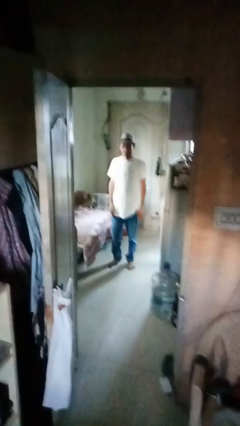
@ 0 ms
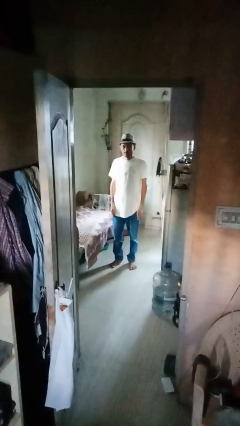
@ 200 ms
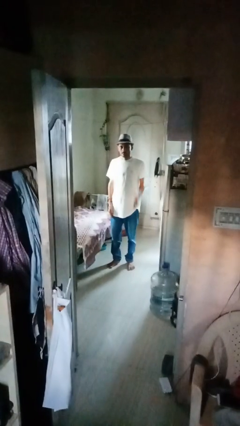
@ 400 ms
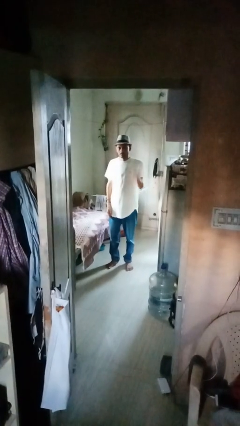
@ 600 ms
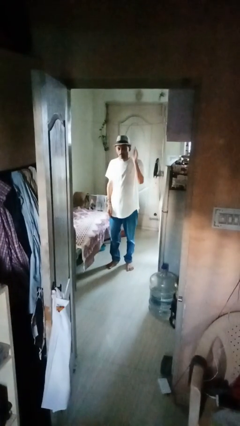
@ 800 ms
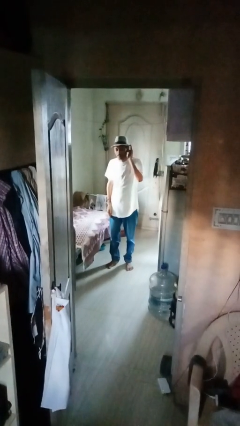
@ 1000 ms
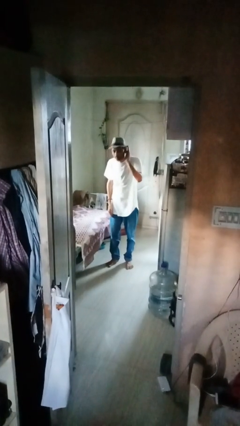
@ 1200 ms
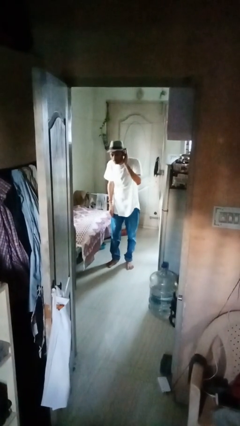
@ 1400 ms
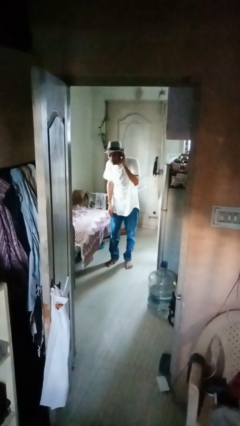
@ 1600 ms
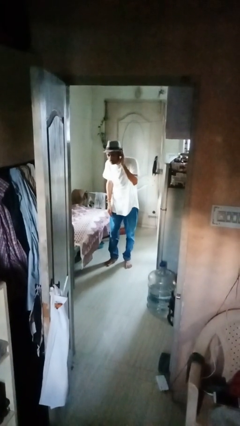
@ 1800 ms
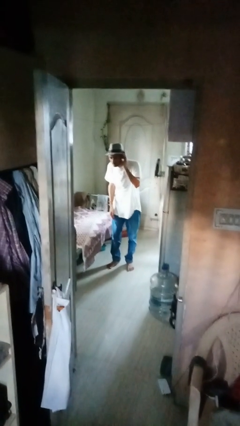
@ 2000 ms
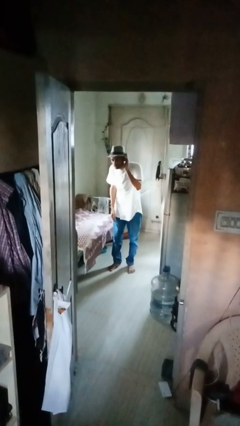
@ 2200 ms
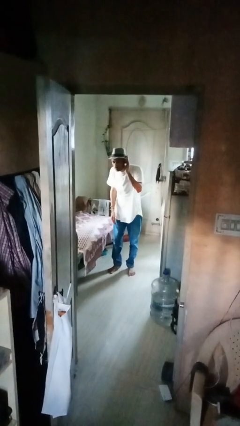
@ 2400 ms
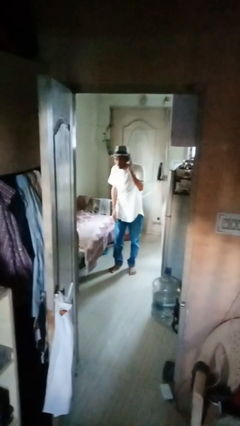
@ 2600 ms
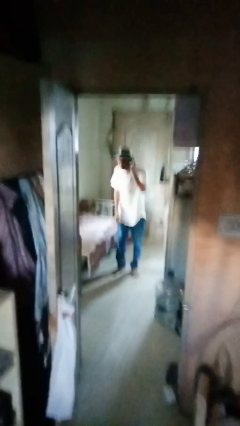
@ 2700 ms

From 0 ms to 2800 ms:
person gestures listen closely

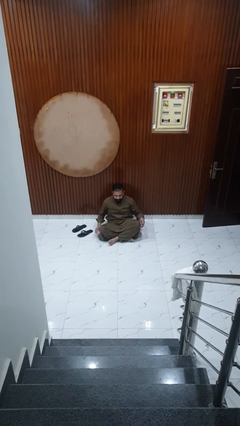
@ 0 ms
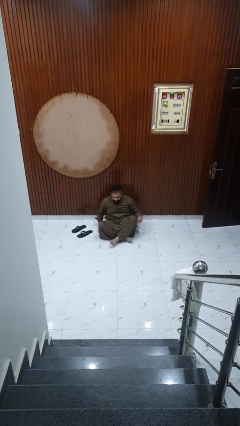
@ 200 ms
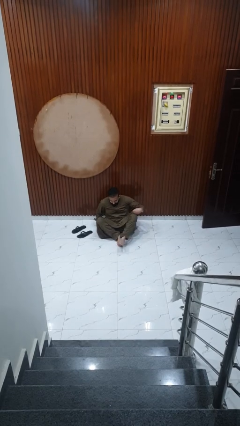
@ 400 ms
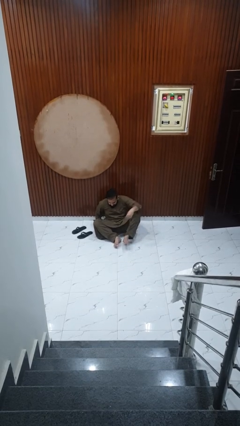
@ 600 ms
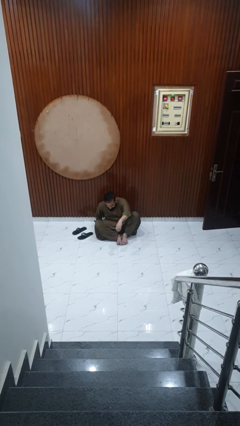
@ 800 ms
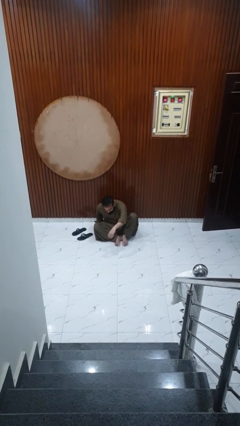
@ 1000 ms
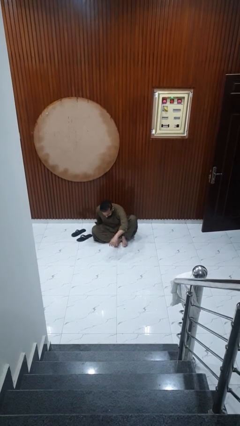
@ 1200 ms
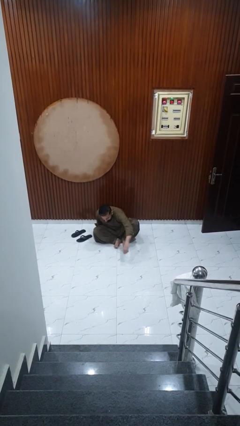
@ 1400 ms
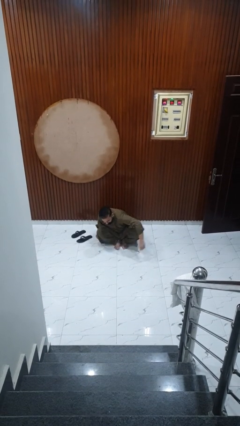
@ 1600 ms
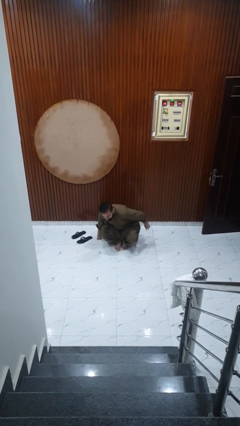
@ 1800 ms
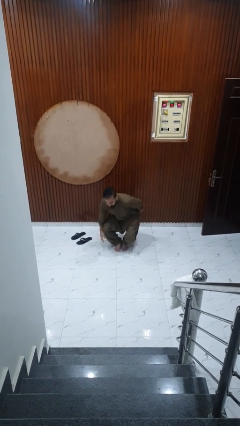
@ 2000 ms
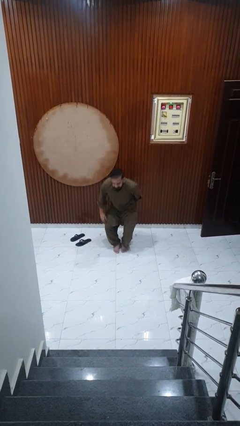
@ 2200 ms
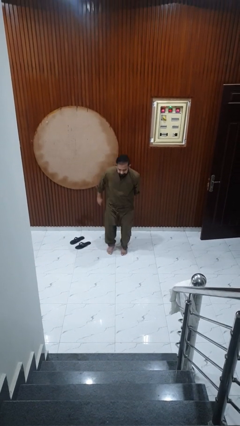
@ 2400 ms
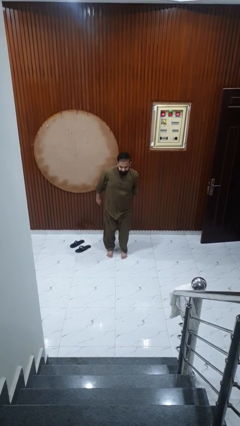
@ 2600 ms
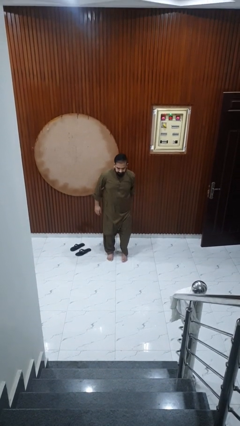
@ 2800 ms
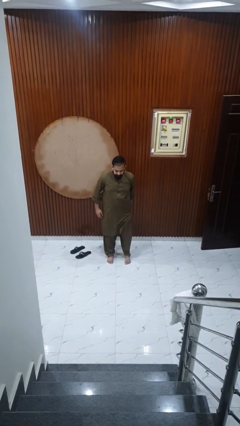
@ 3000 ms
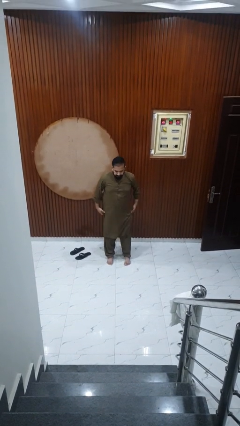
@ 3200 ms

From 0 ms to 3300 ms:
person stands up from floor

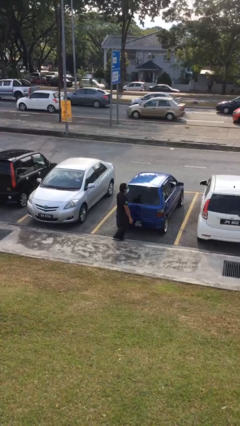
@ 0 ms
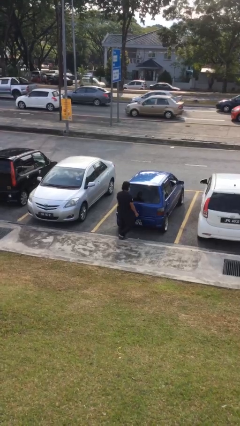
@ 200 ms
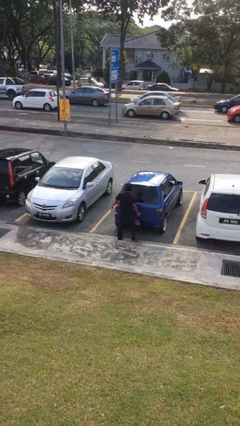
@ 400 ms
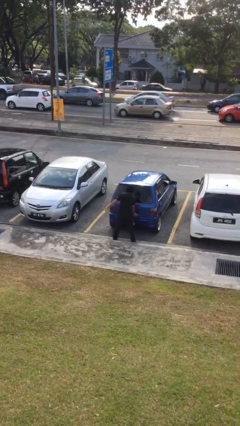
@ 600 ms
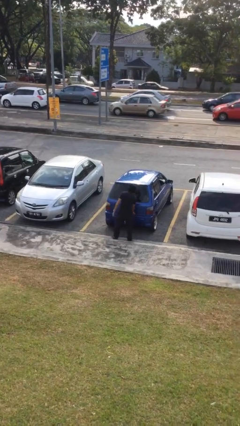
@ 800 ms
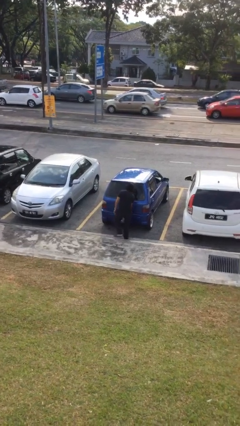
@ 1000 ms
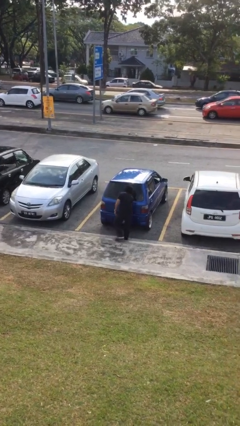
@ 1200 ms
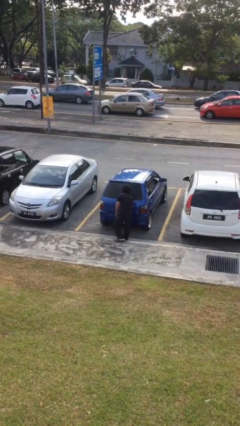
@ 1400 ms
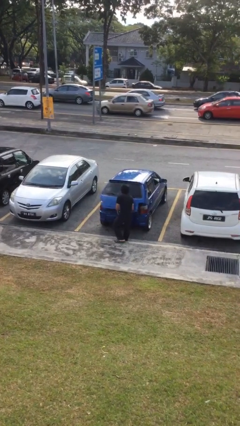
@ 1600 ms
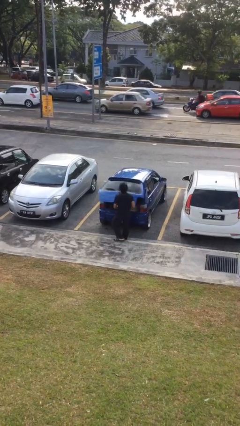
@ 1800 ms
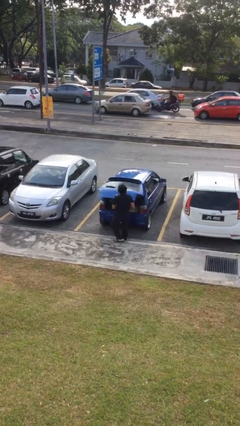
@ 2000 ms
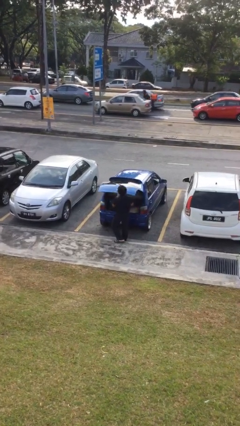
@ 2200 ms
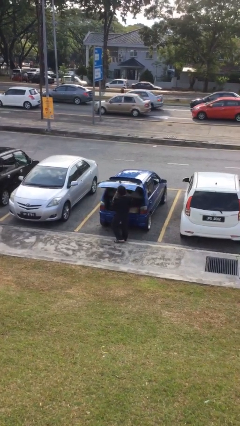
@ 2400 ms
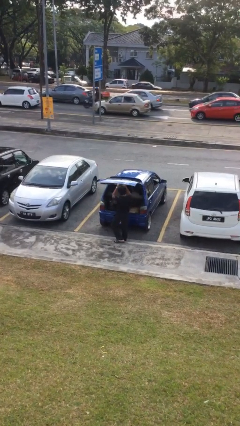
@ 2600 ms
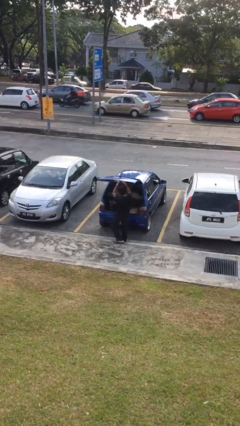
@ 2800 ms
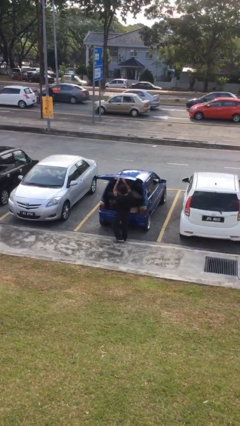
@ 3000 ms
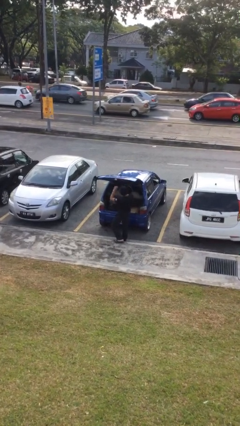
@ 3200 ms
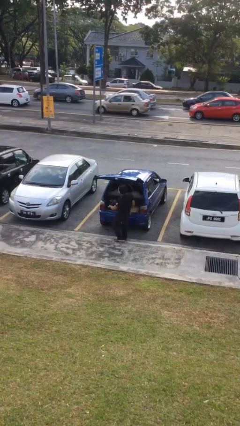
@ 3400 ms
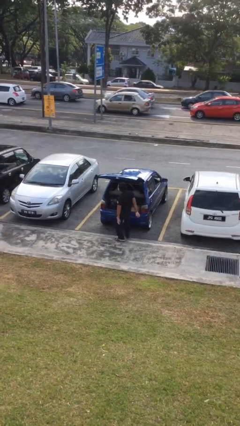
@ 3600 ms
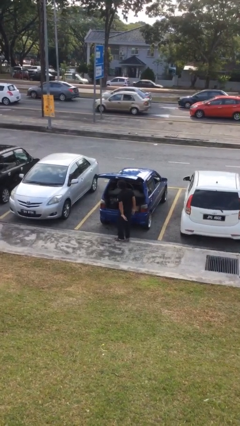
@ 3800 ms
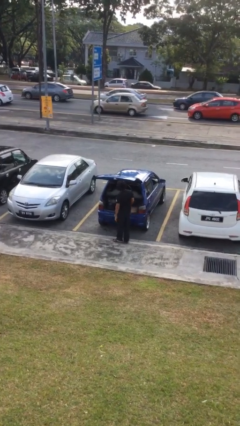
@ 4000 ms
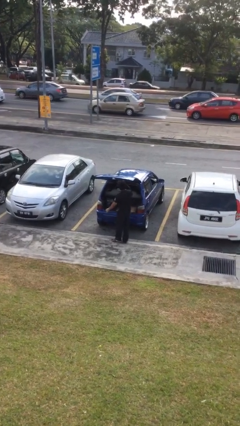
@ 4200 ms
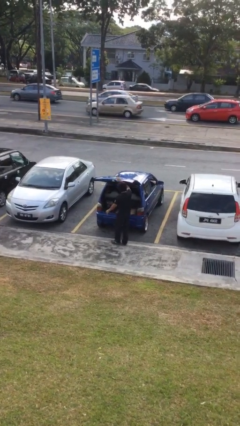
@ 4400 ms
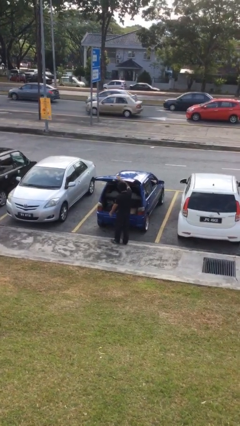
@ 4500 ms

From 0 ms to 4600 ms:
person opens car trunk

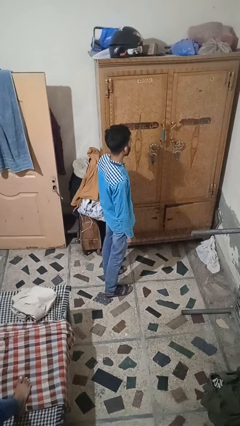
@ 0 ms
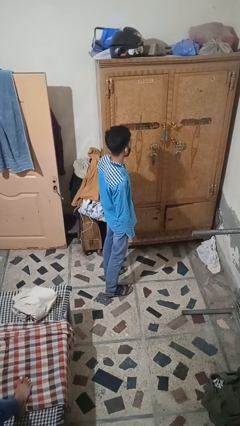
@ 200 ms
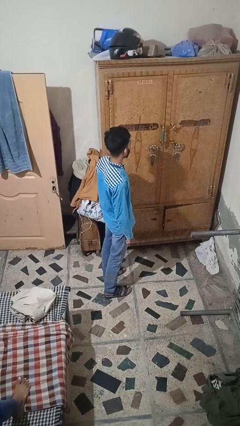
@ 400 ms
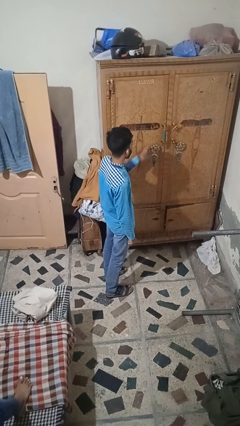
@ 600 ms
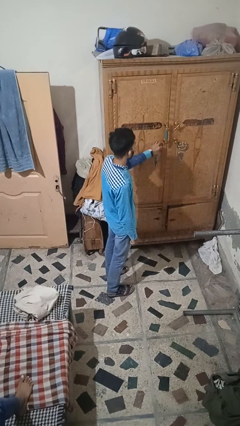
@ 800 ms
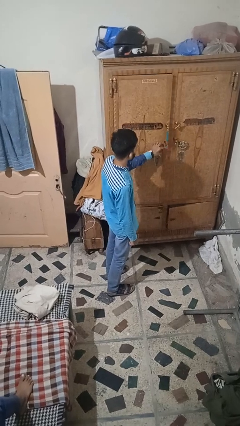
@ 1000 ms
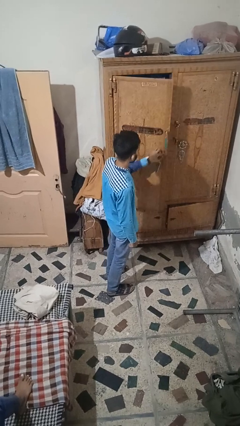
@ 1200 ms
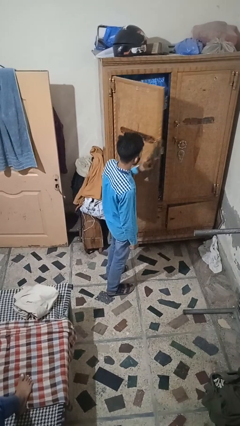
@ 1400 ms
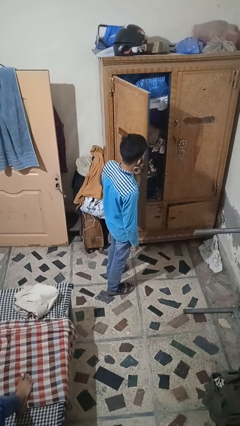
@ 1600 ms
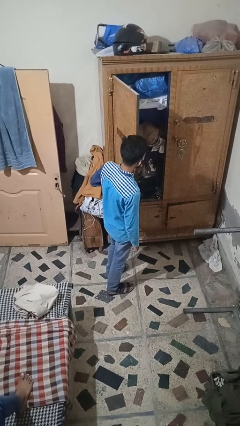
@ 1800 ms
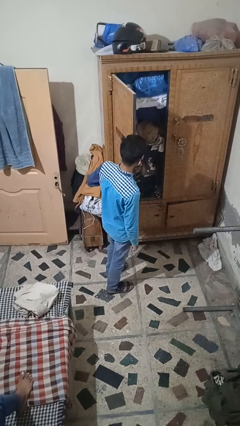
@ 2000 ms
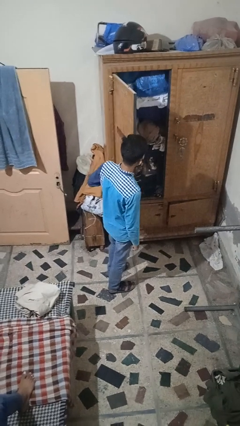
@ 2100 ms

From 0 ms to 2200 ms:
person opens closet door

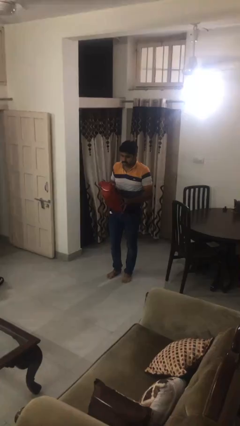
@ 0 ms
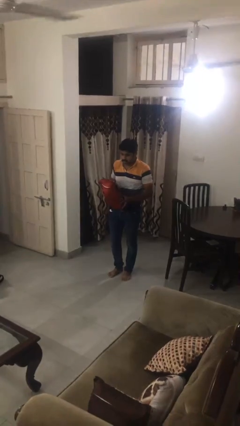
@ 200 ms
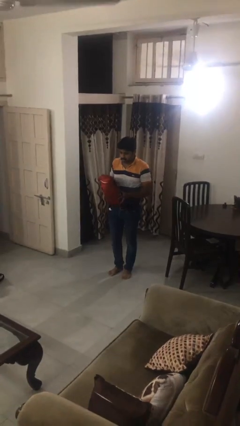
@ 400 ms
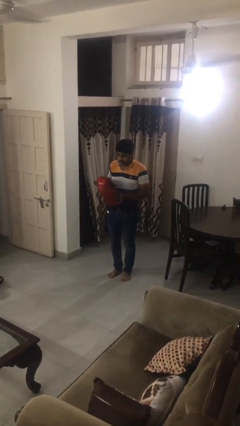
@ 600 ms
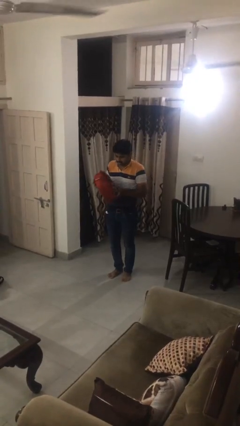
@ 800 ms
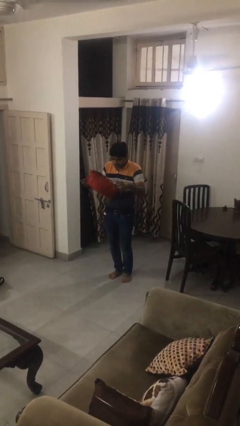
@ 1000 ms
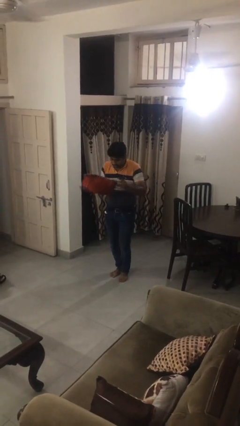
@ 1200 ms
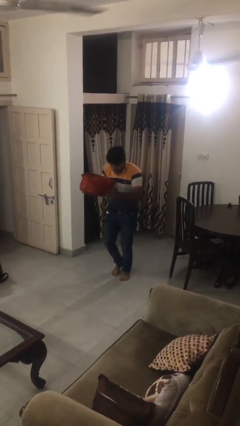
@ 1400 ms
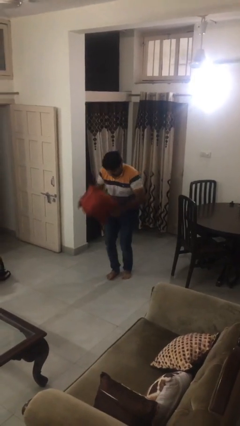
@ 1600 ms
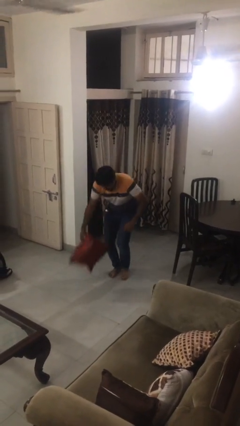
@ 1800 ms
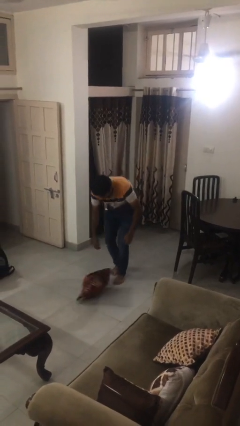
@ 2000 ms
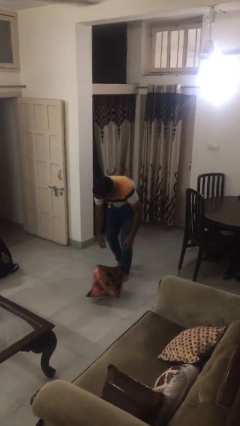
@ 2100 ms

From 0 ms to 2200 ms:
person drops object

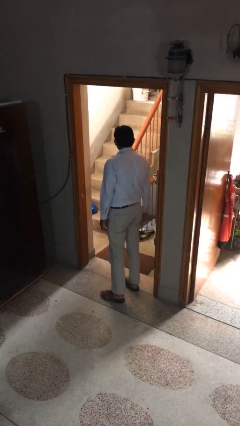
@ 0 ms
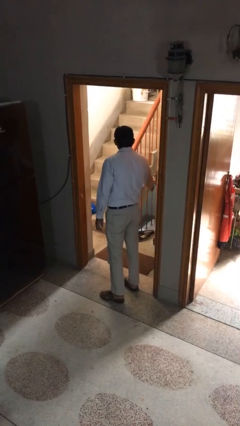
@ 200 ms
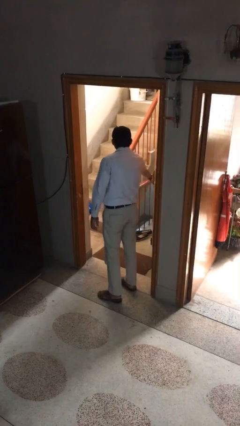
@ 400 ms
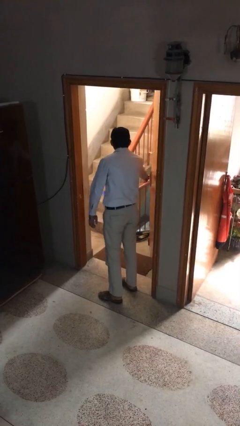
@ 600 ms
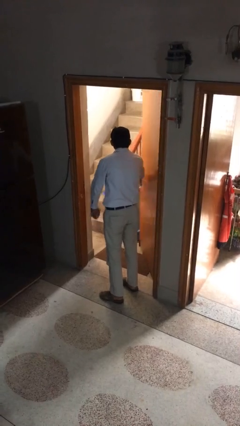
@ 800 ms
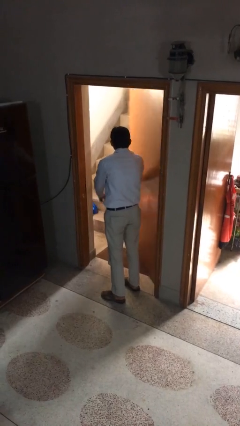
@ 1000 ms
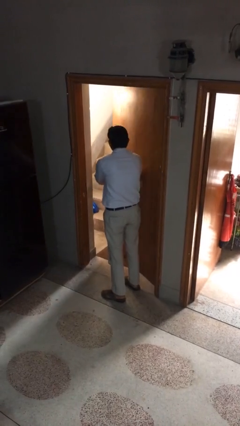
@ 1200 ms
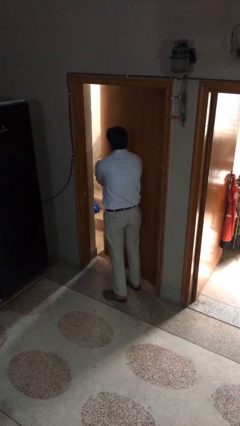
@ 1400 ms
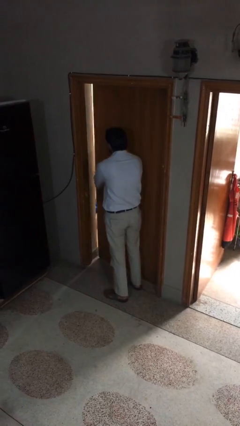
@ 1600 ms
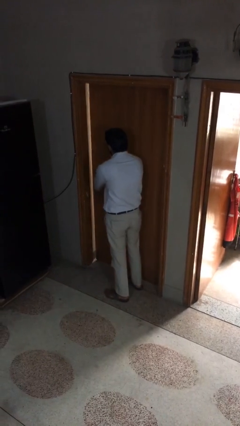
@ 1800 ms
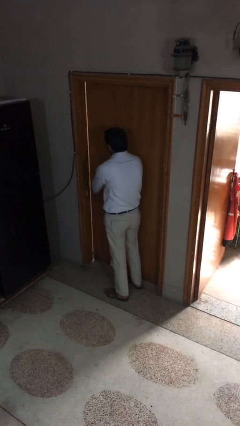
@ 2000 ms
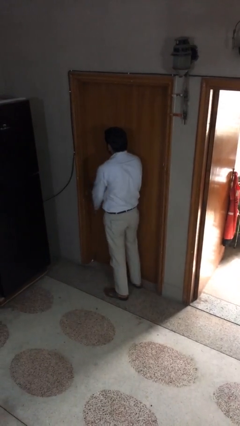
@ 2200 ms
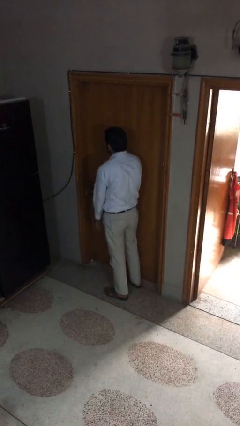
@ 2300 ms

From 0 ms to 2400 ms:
person closes facility door
